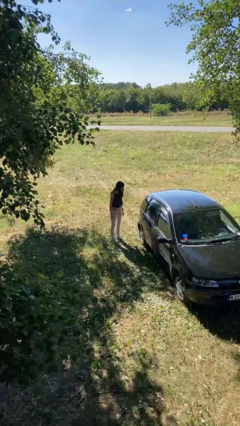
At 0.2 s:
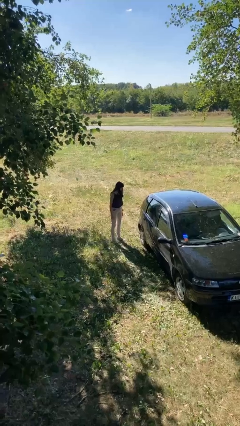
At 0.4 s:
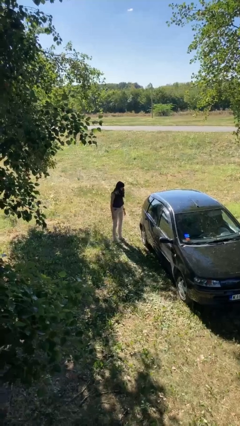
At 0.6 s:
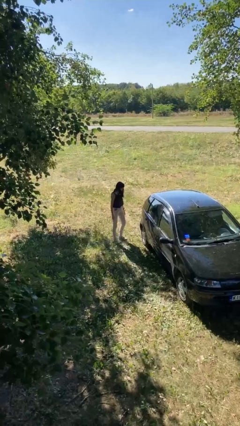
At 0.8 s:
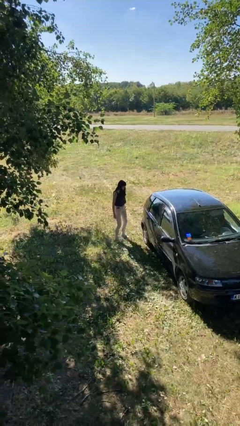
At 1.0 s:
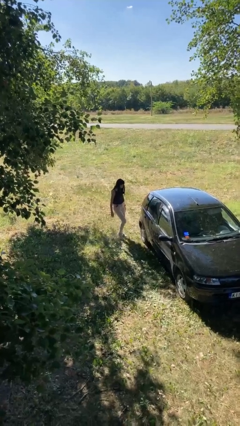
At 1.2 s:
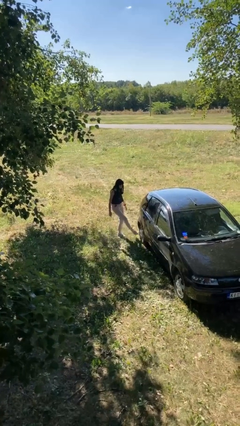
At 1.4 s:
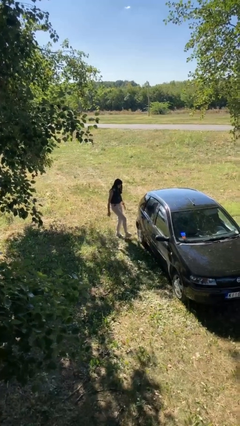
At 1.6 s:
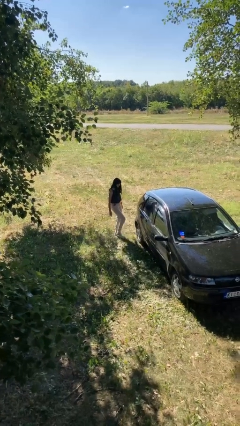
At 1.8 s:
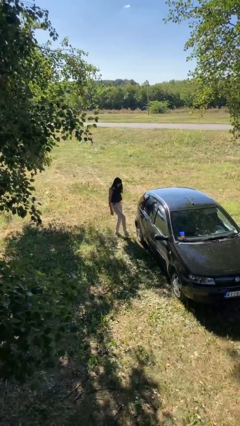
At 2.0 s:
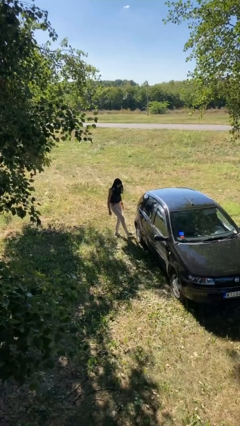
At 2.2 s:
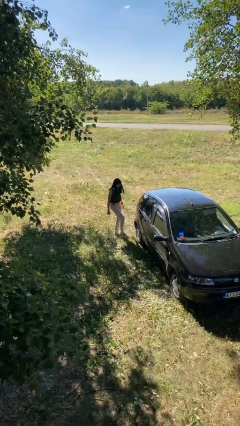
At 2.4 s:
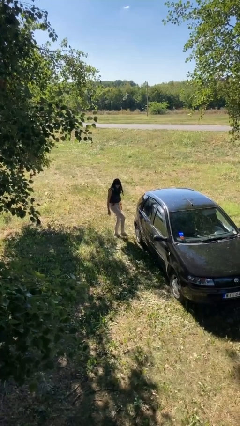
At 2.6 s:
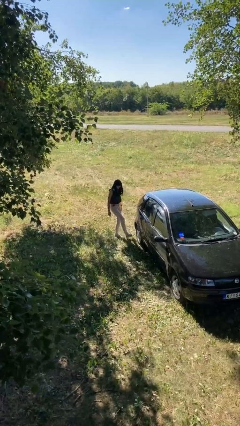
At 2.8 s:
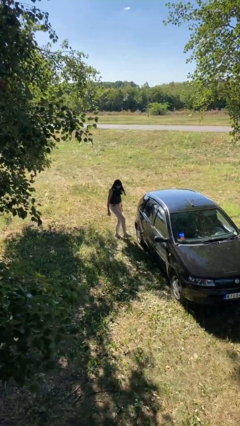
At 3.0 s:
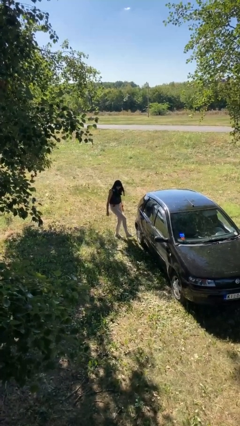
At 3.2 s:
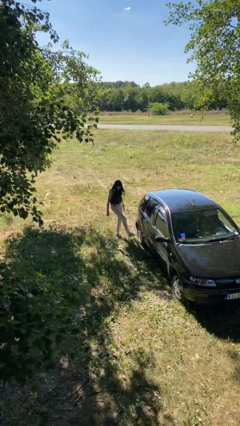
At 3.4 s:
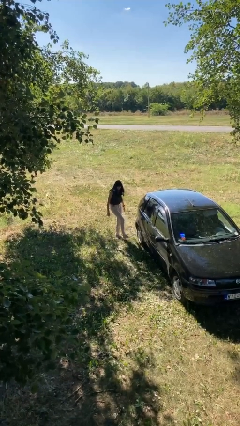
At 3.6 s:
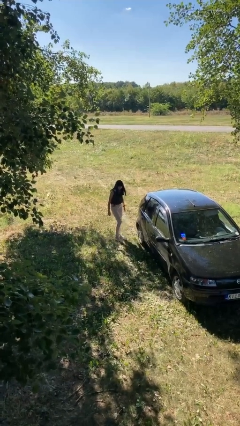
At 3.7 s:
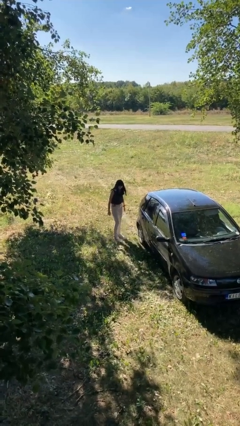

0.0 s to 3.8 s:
person kicks car tires

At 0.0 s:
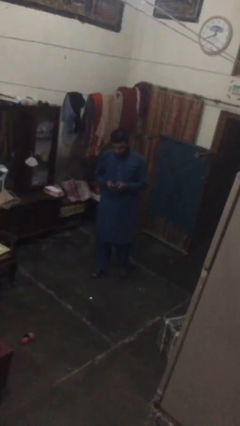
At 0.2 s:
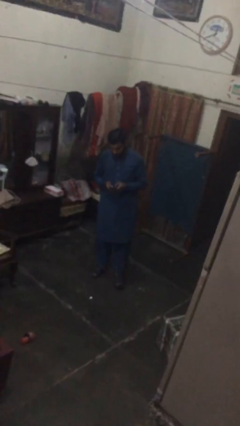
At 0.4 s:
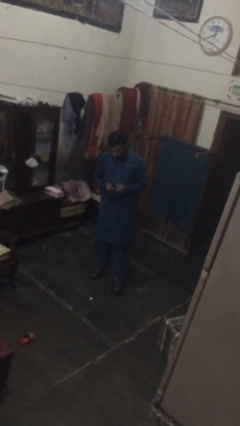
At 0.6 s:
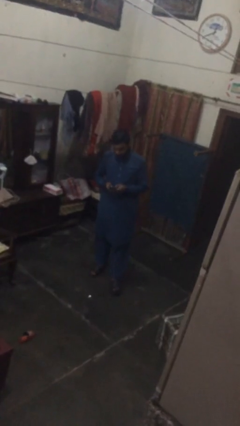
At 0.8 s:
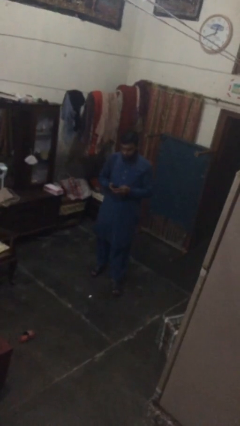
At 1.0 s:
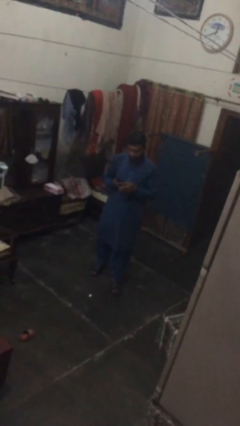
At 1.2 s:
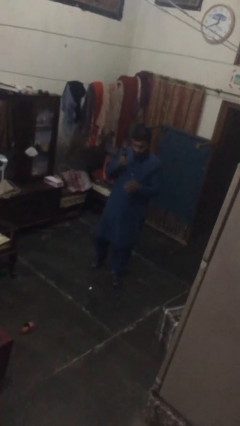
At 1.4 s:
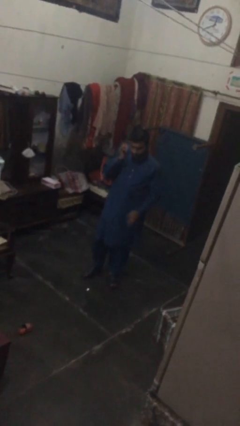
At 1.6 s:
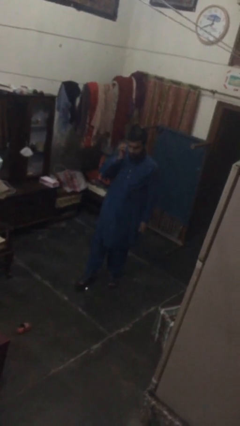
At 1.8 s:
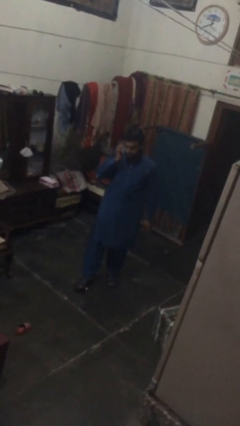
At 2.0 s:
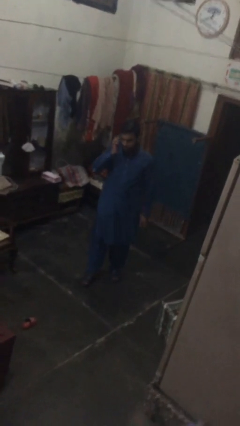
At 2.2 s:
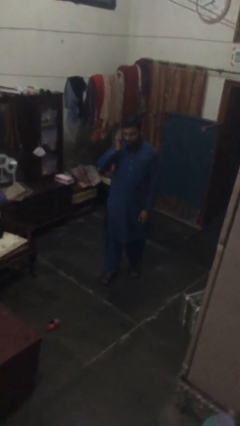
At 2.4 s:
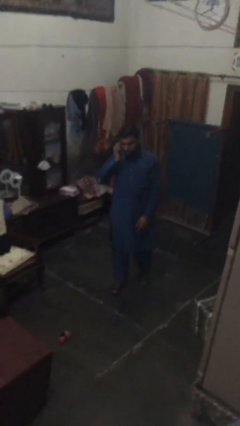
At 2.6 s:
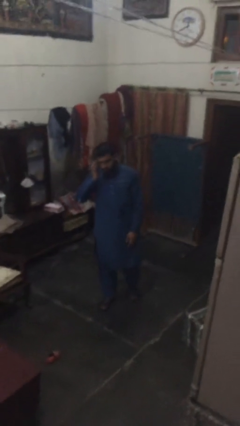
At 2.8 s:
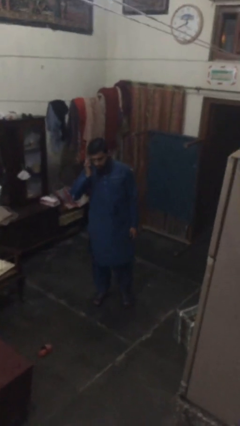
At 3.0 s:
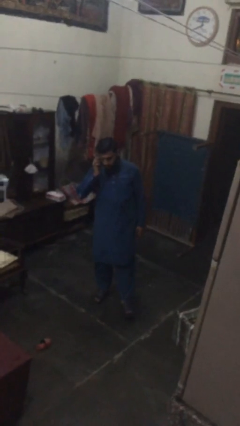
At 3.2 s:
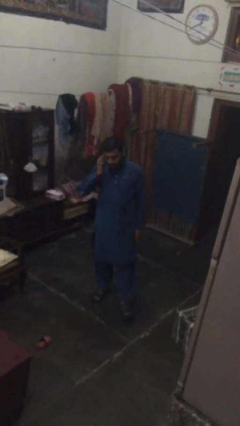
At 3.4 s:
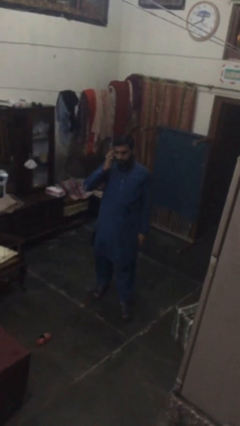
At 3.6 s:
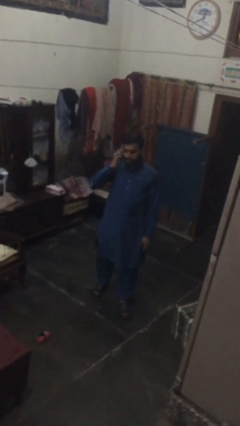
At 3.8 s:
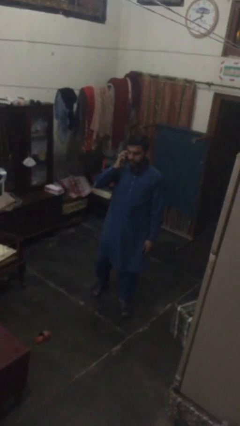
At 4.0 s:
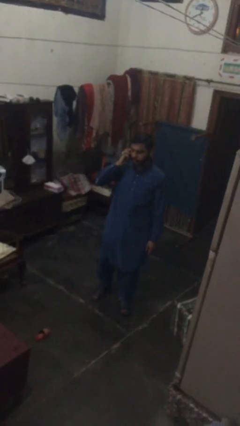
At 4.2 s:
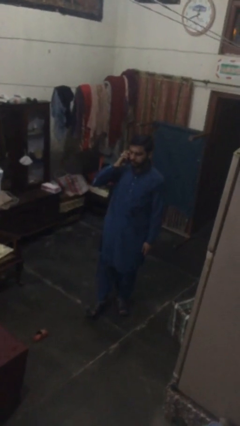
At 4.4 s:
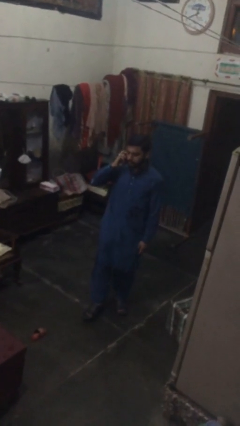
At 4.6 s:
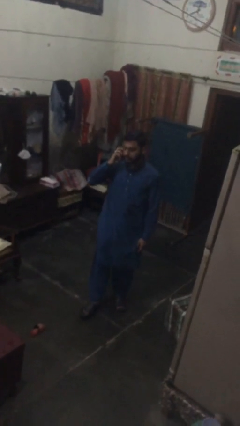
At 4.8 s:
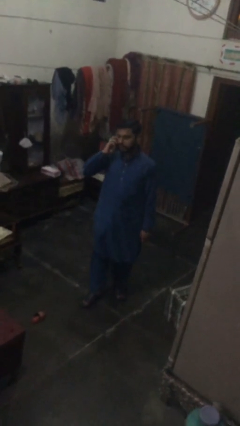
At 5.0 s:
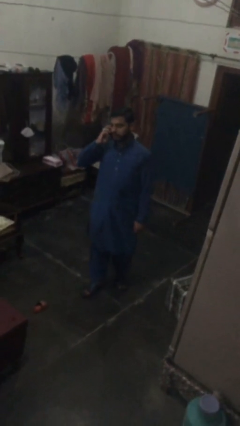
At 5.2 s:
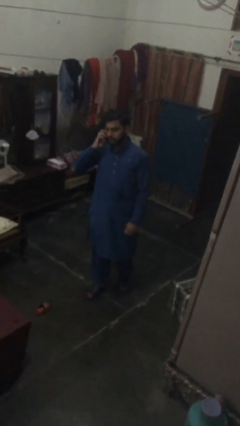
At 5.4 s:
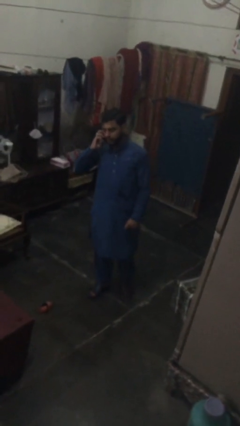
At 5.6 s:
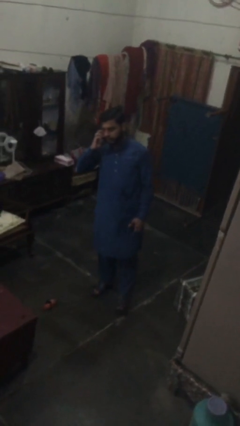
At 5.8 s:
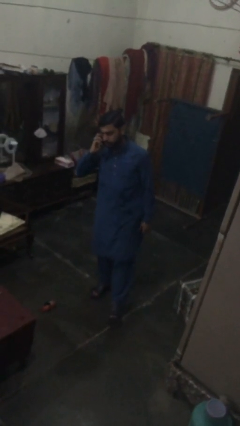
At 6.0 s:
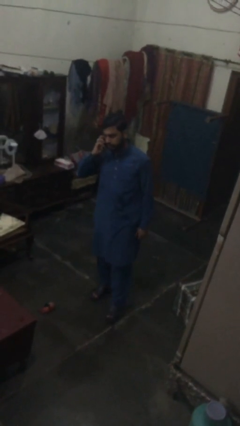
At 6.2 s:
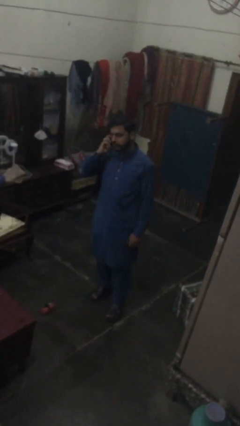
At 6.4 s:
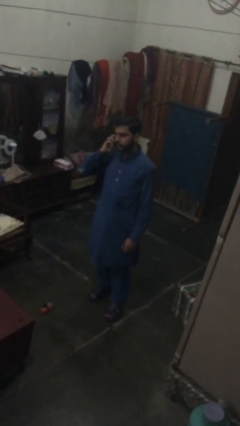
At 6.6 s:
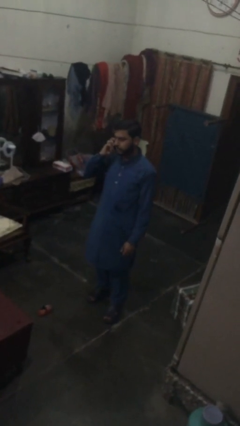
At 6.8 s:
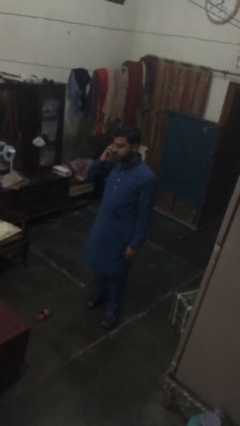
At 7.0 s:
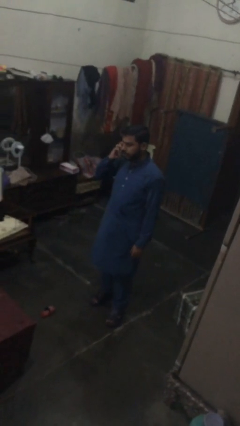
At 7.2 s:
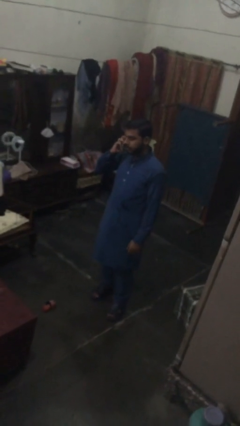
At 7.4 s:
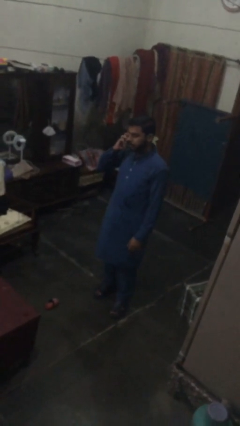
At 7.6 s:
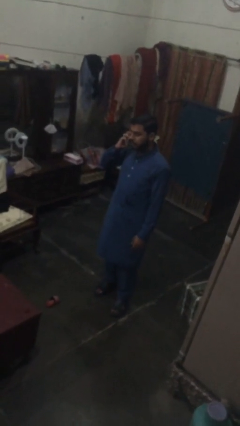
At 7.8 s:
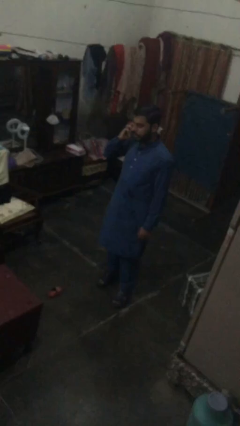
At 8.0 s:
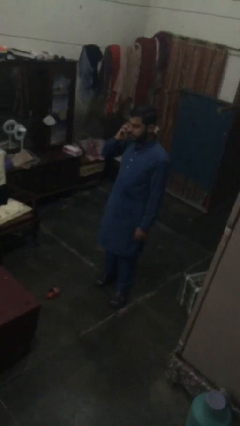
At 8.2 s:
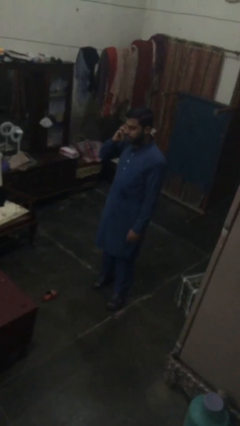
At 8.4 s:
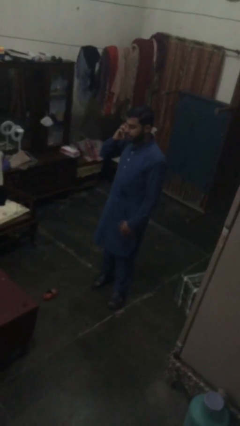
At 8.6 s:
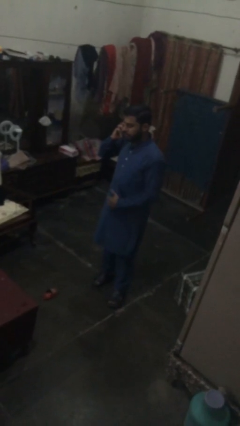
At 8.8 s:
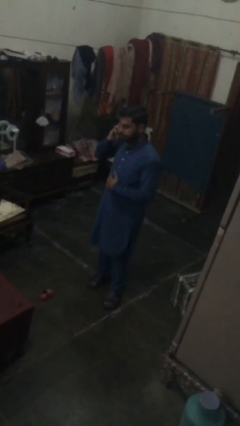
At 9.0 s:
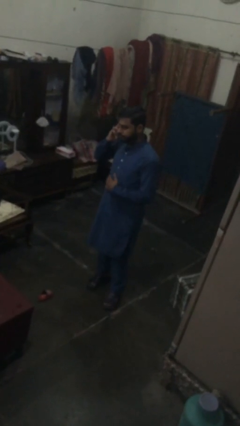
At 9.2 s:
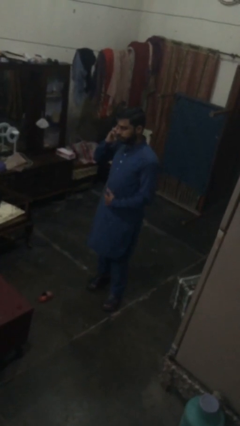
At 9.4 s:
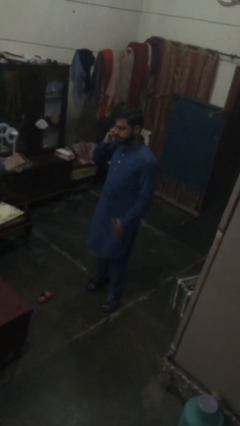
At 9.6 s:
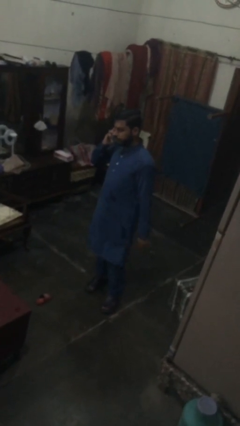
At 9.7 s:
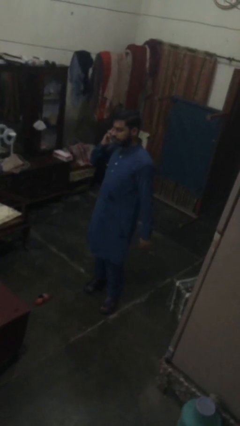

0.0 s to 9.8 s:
person talks on phone

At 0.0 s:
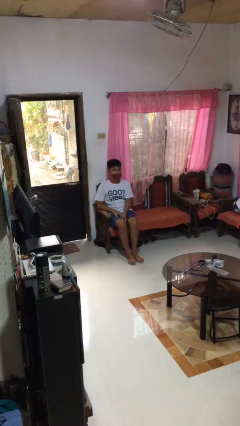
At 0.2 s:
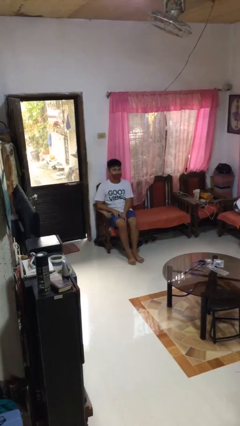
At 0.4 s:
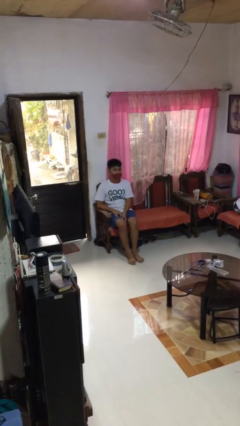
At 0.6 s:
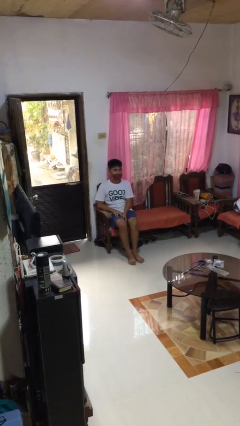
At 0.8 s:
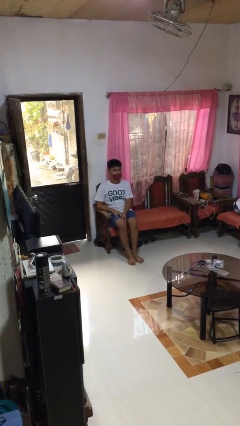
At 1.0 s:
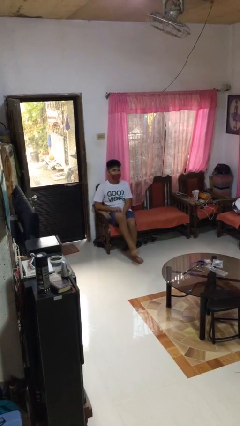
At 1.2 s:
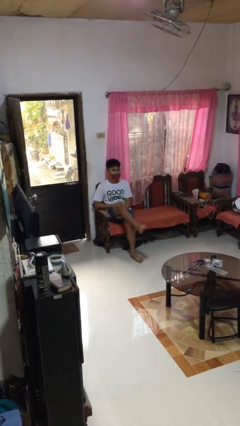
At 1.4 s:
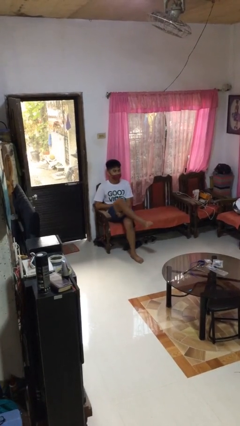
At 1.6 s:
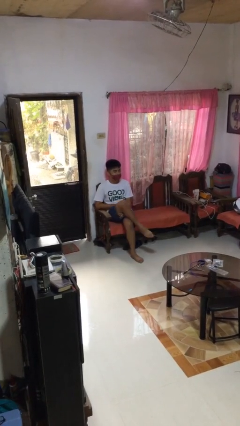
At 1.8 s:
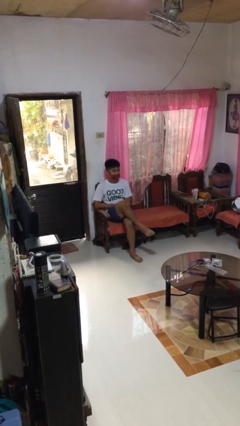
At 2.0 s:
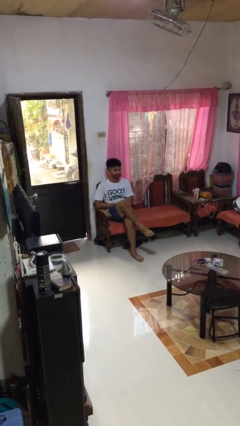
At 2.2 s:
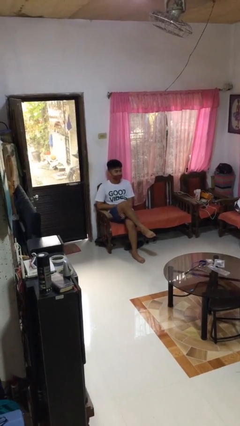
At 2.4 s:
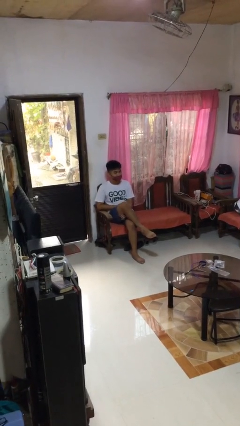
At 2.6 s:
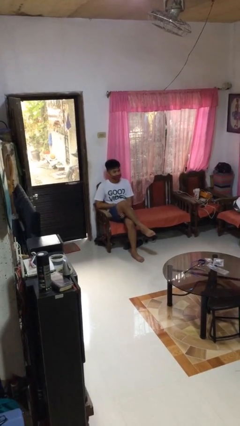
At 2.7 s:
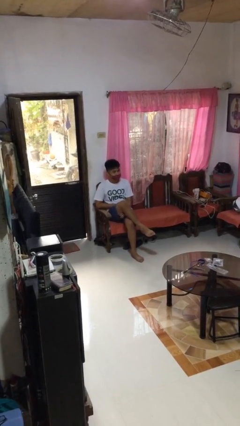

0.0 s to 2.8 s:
person crosses legs

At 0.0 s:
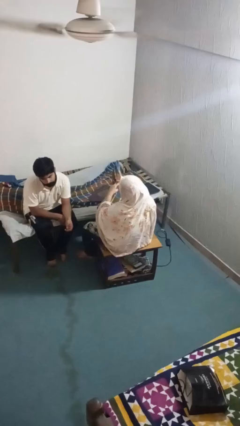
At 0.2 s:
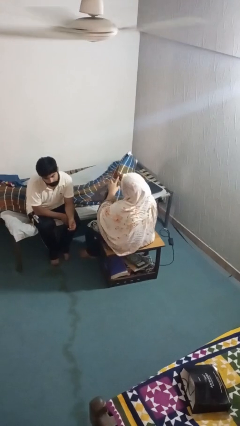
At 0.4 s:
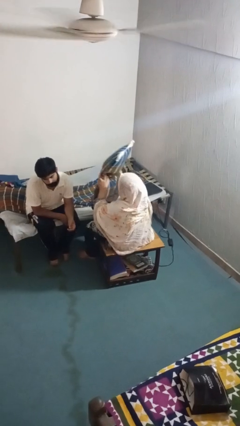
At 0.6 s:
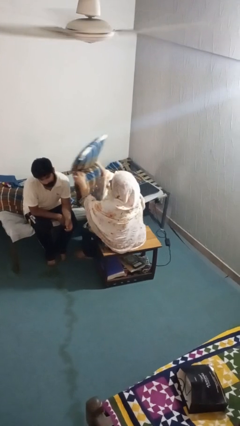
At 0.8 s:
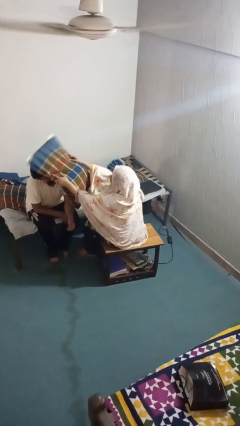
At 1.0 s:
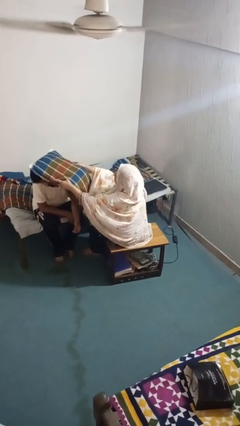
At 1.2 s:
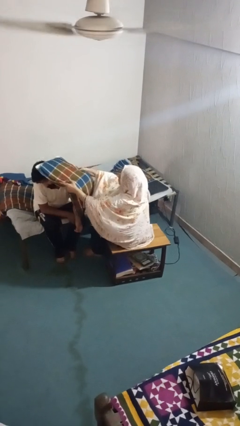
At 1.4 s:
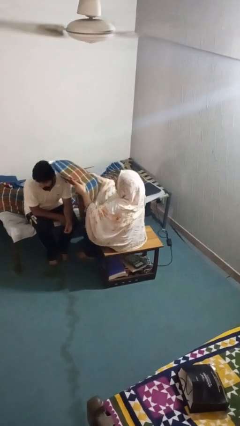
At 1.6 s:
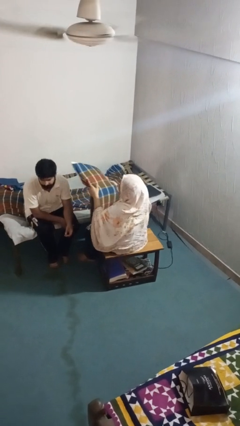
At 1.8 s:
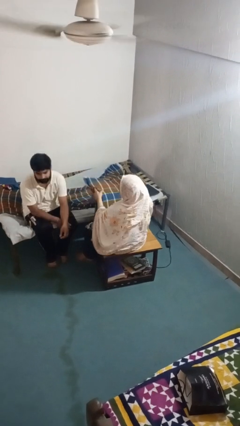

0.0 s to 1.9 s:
person hits person with pillow
